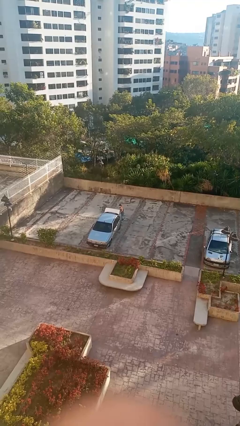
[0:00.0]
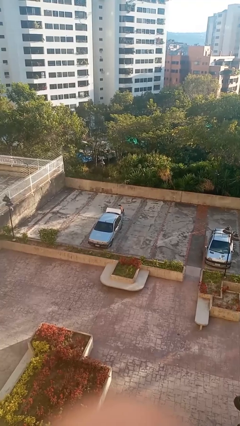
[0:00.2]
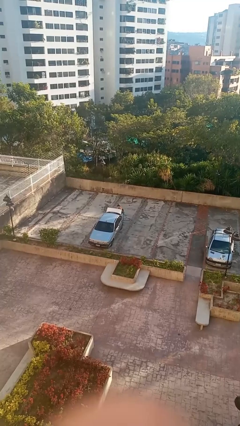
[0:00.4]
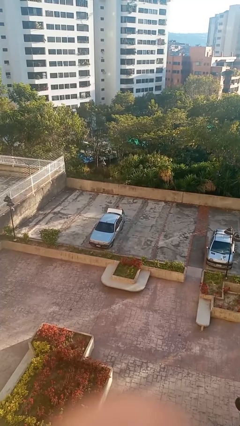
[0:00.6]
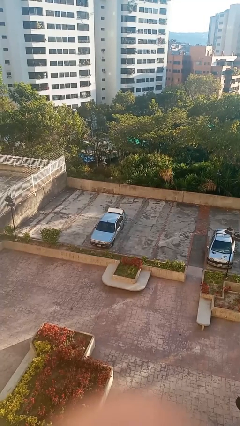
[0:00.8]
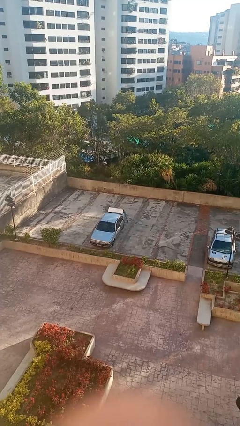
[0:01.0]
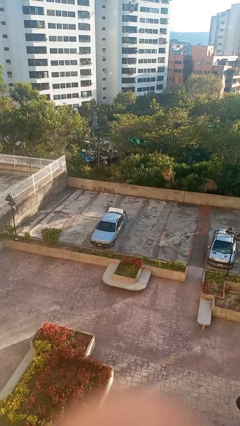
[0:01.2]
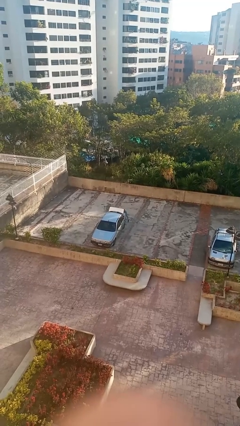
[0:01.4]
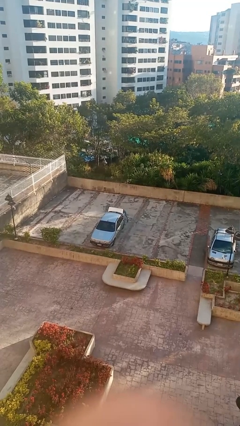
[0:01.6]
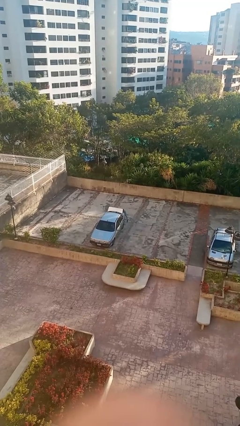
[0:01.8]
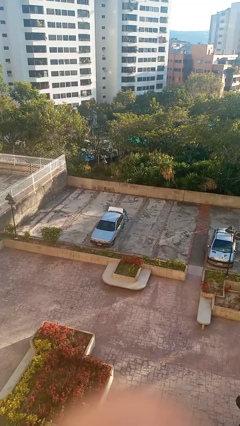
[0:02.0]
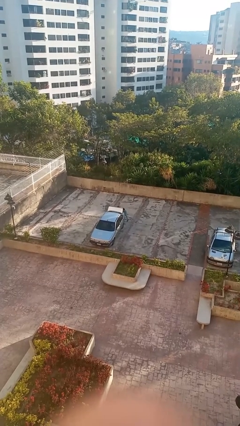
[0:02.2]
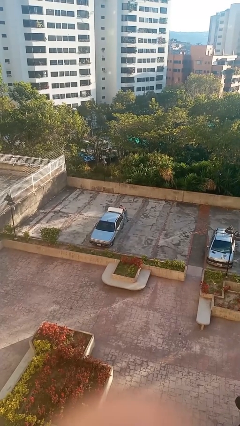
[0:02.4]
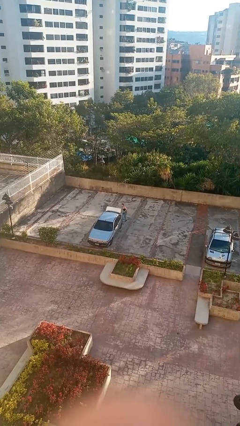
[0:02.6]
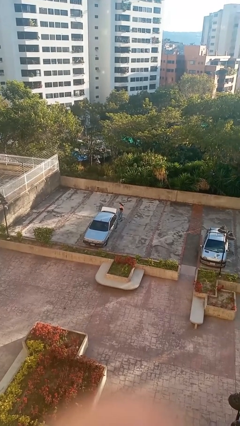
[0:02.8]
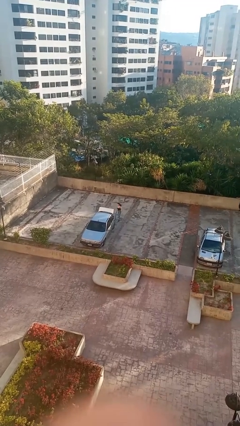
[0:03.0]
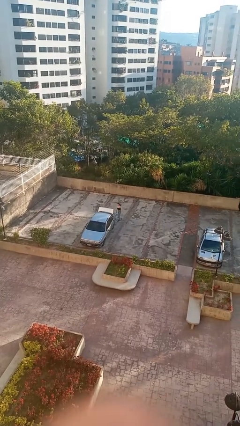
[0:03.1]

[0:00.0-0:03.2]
person loads car

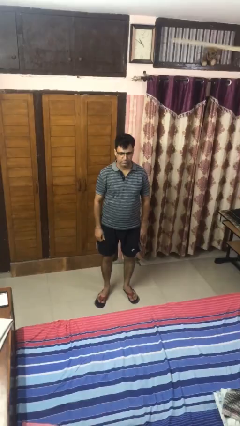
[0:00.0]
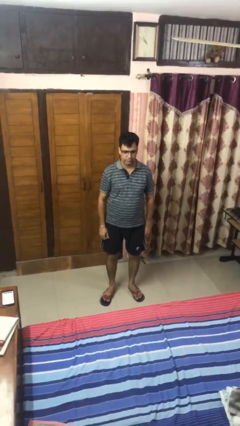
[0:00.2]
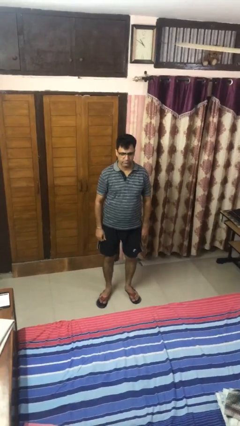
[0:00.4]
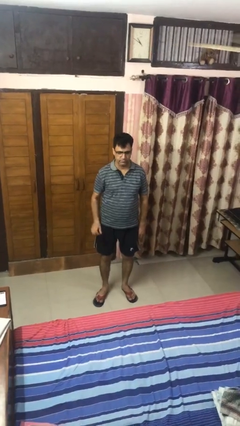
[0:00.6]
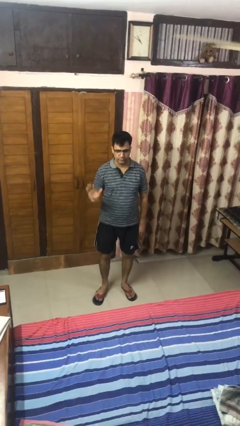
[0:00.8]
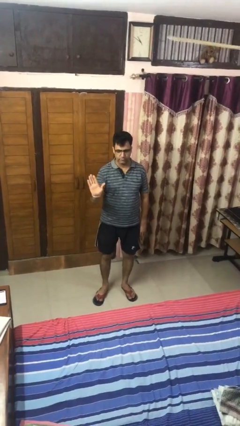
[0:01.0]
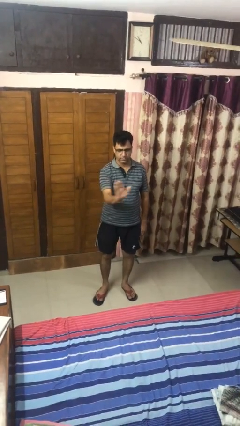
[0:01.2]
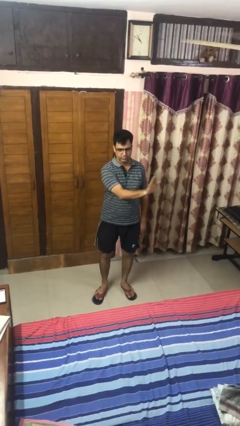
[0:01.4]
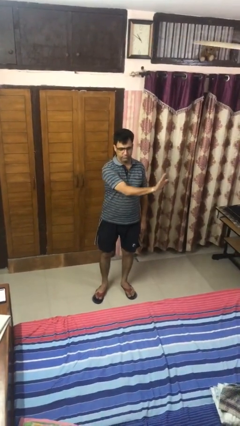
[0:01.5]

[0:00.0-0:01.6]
person gestures swipe left

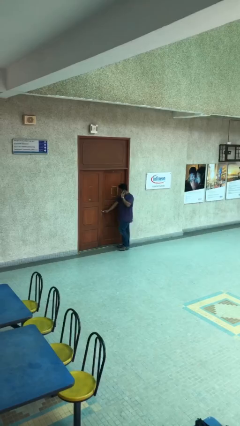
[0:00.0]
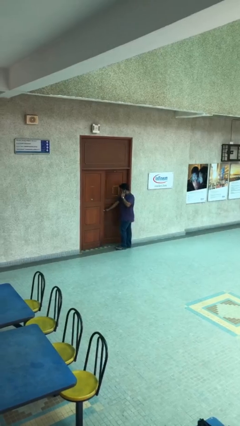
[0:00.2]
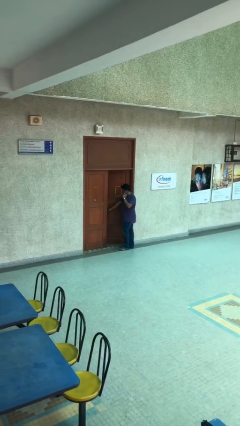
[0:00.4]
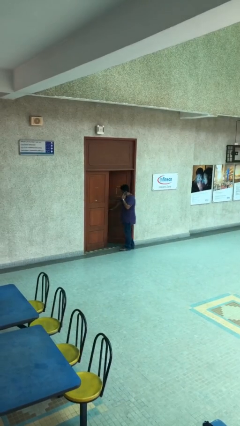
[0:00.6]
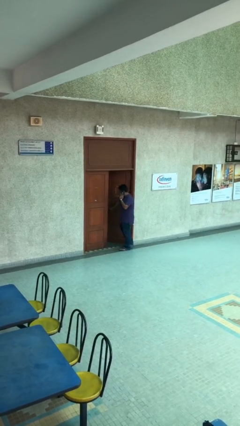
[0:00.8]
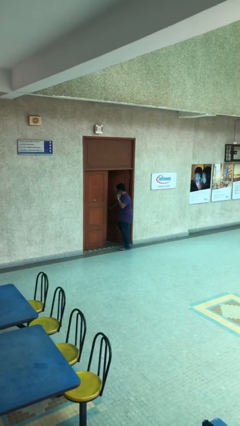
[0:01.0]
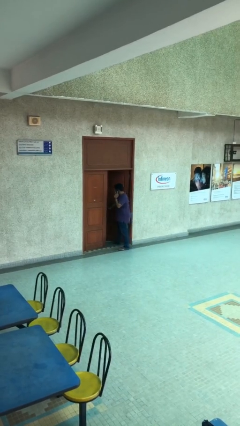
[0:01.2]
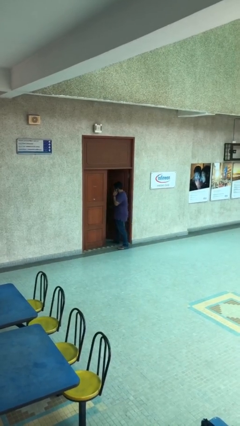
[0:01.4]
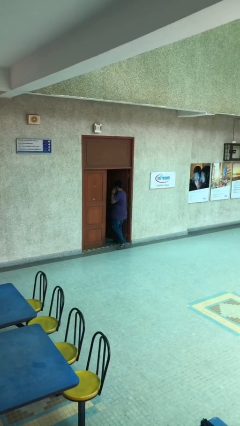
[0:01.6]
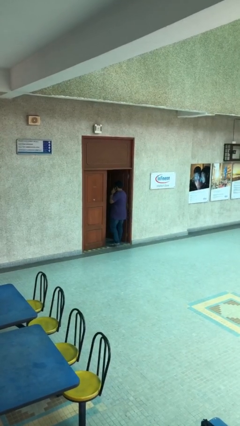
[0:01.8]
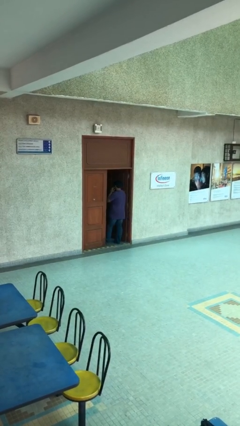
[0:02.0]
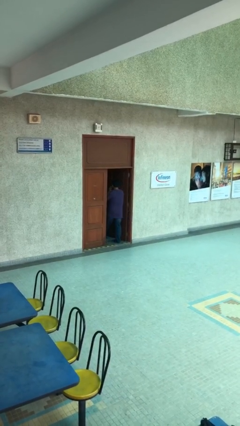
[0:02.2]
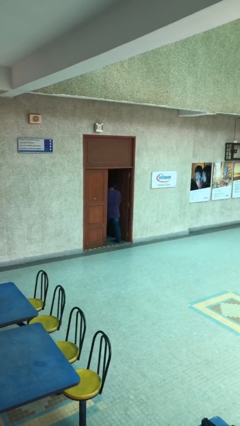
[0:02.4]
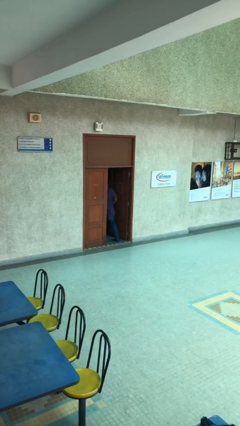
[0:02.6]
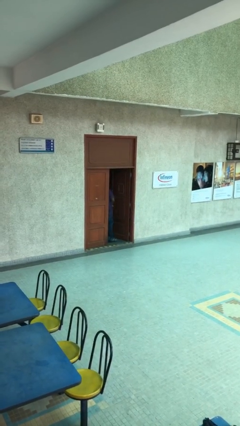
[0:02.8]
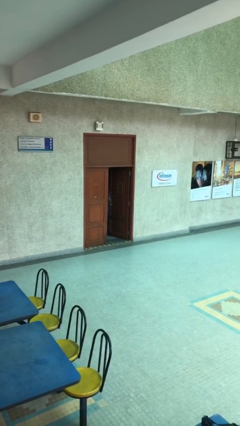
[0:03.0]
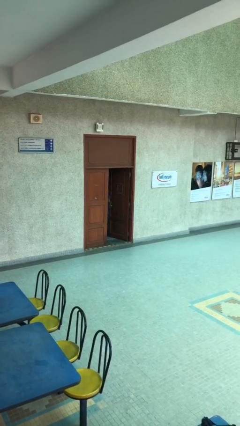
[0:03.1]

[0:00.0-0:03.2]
person exits scene through structure

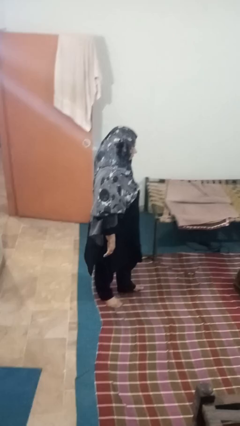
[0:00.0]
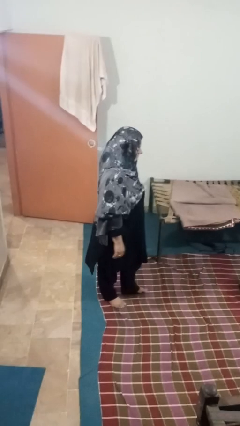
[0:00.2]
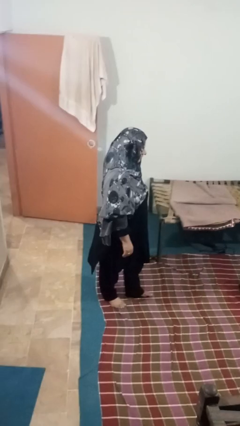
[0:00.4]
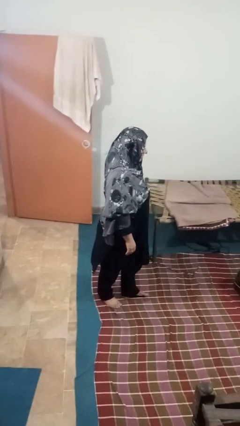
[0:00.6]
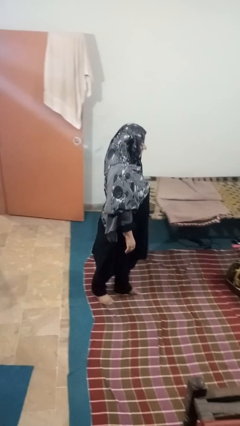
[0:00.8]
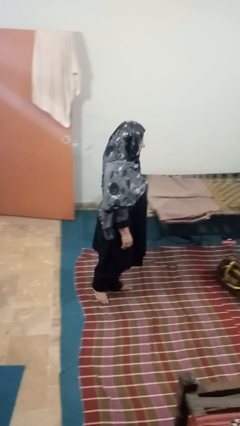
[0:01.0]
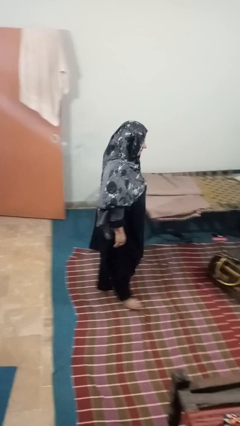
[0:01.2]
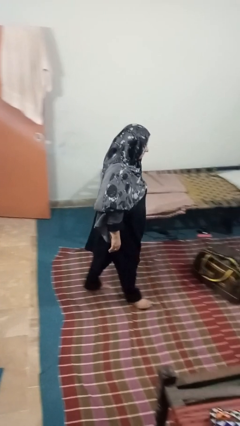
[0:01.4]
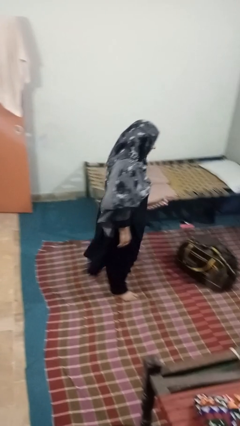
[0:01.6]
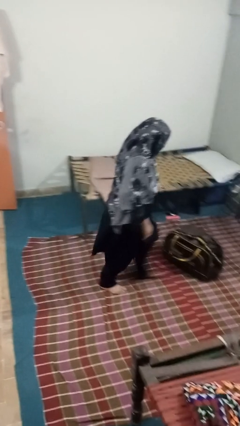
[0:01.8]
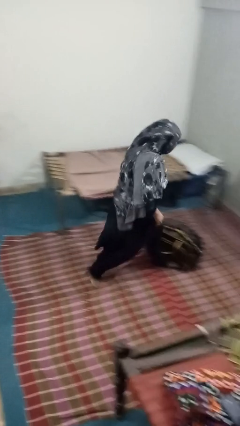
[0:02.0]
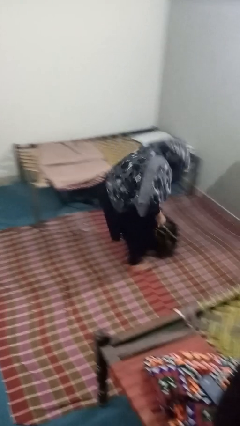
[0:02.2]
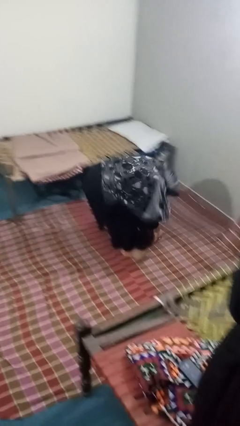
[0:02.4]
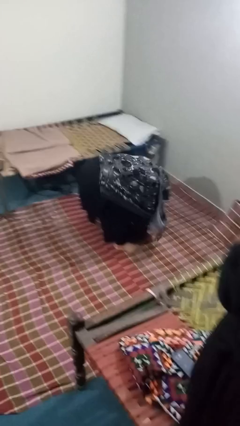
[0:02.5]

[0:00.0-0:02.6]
person trips on object on floor

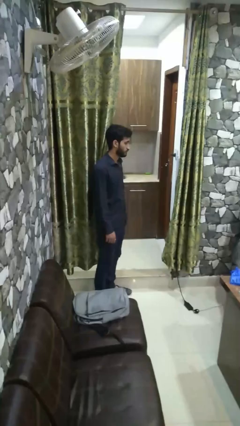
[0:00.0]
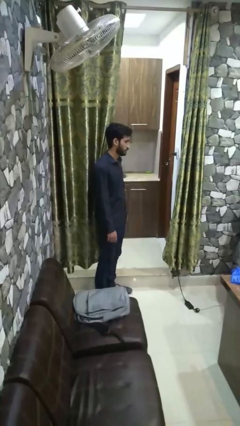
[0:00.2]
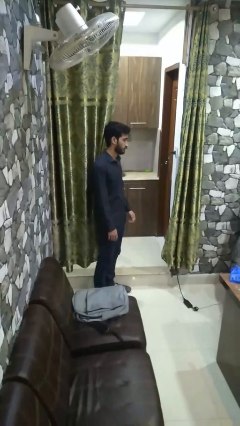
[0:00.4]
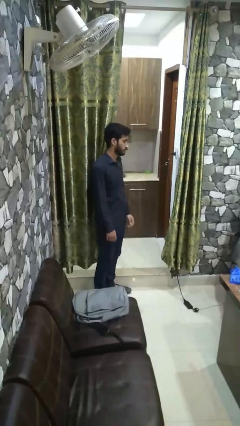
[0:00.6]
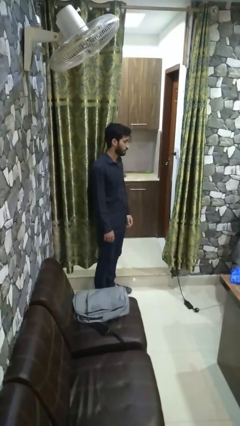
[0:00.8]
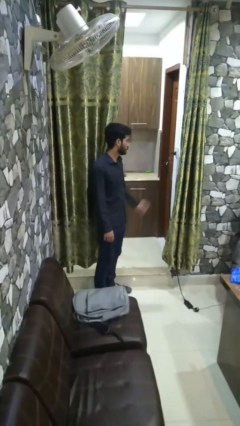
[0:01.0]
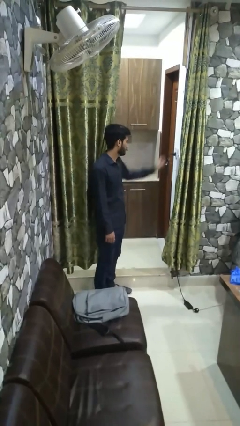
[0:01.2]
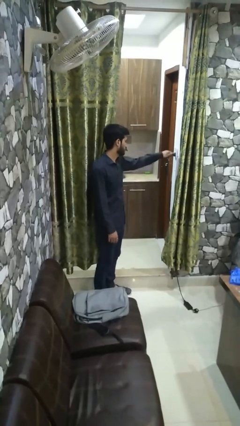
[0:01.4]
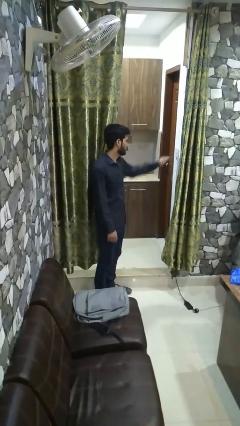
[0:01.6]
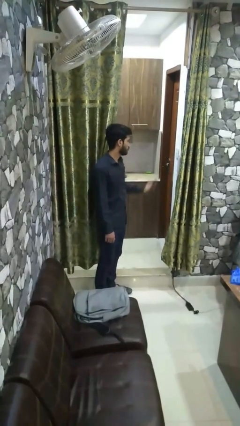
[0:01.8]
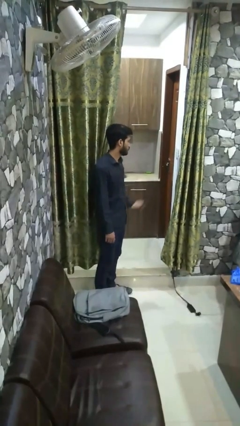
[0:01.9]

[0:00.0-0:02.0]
person unplugs from electrical socket

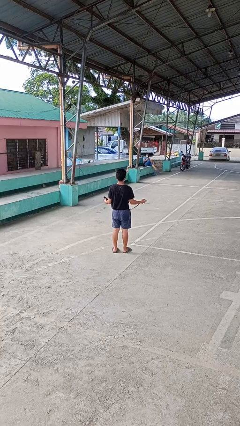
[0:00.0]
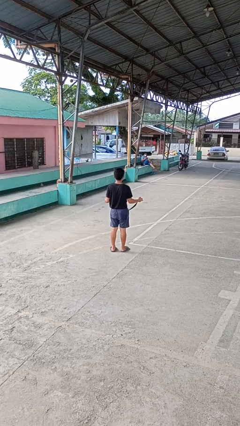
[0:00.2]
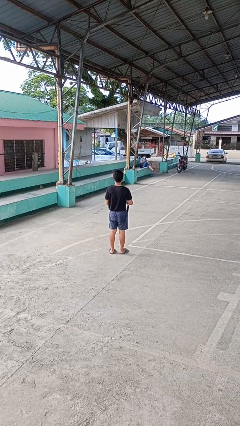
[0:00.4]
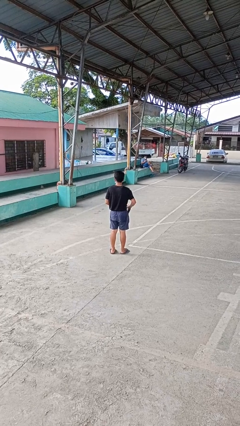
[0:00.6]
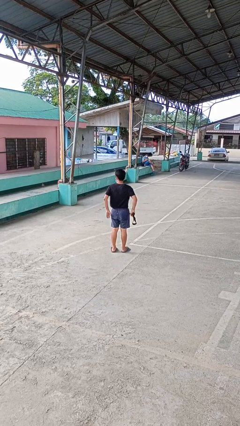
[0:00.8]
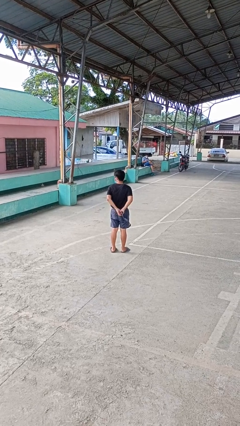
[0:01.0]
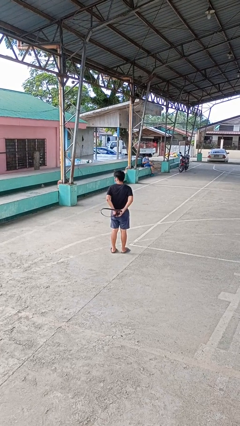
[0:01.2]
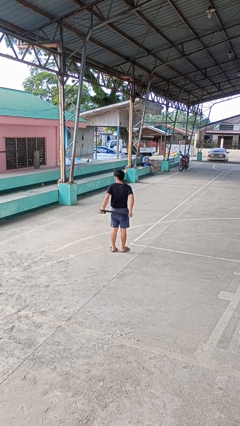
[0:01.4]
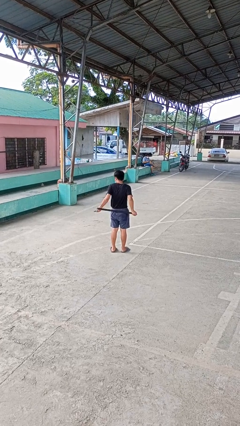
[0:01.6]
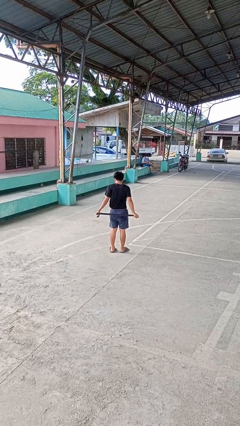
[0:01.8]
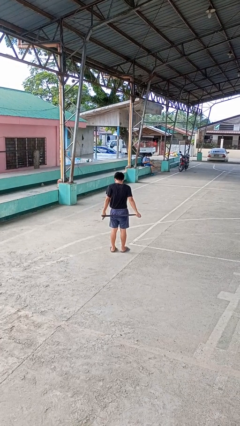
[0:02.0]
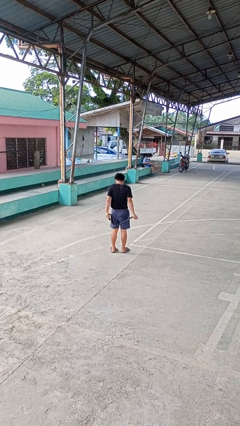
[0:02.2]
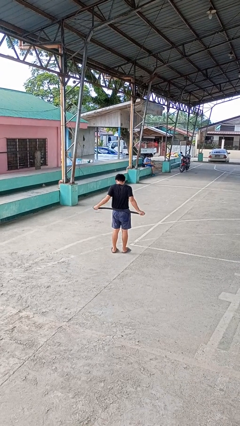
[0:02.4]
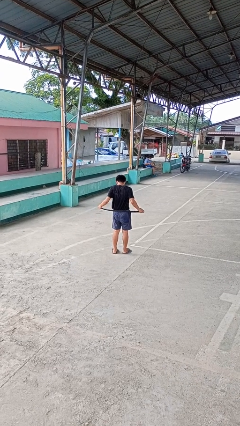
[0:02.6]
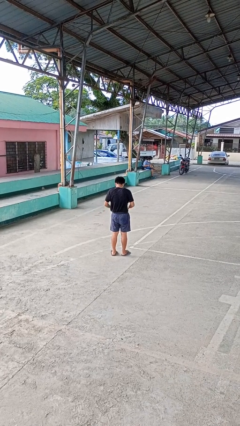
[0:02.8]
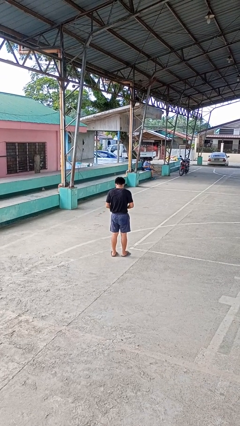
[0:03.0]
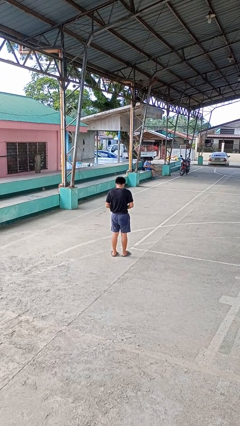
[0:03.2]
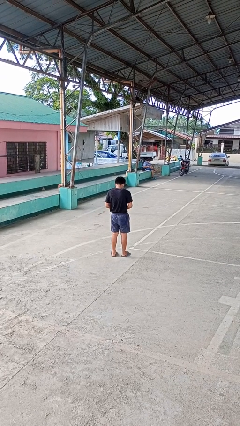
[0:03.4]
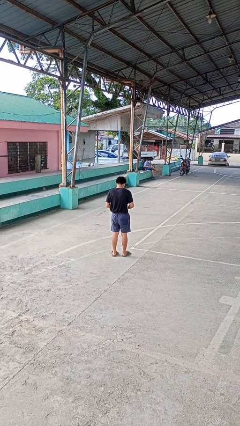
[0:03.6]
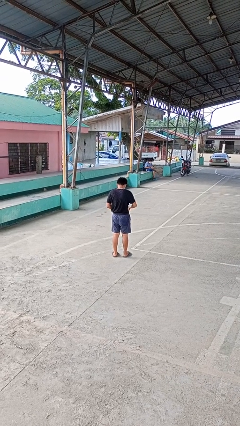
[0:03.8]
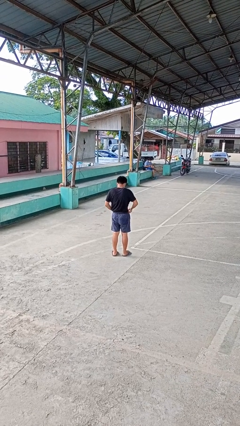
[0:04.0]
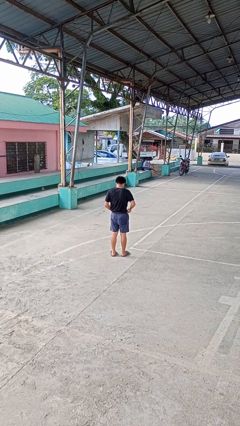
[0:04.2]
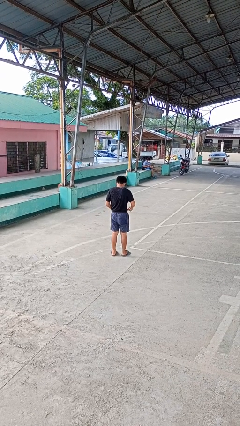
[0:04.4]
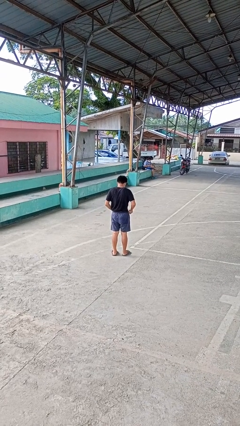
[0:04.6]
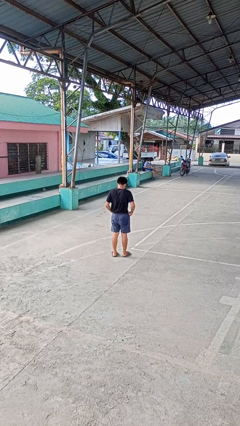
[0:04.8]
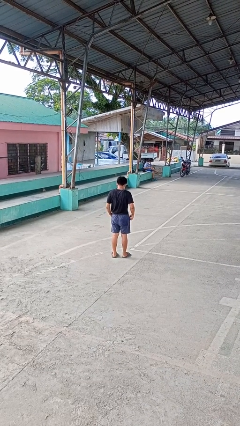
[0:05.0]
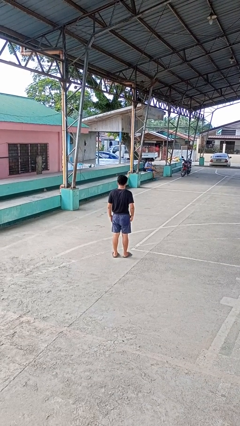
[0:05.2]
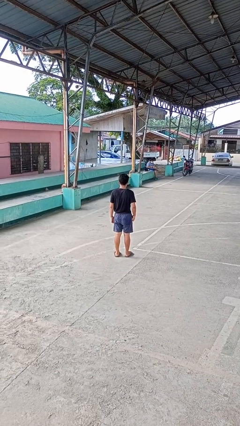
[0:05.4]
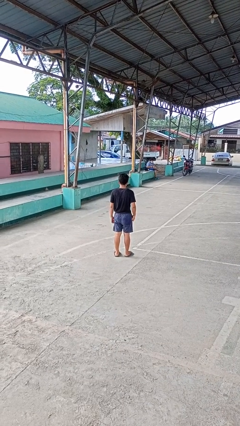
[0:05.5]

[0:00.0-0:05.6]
person puts on belt
